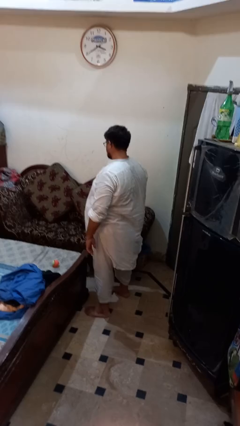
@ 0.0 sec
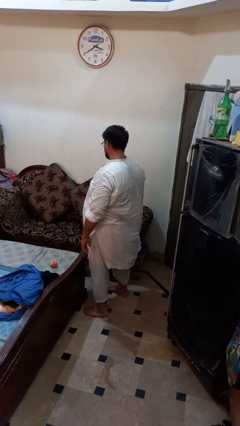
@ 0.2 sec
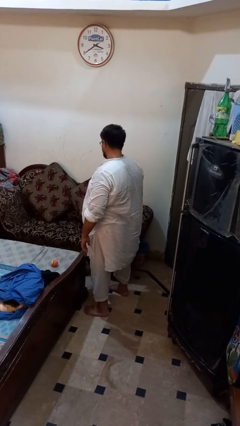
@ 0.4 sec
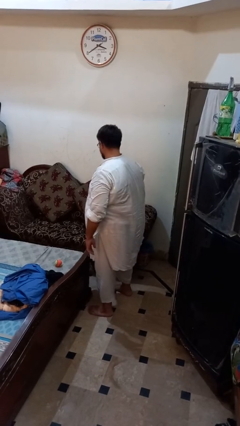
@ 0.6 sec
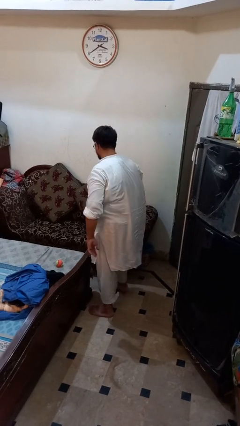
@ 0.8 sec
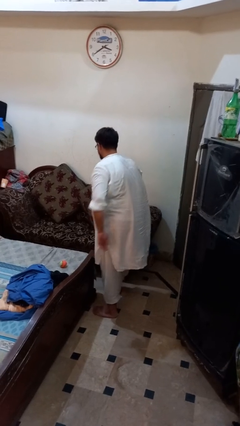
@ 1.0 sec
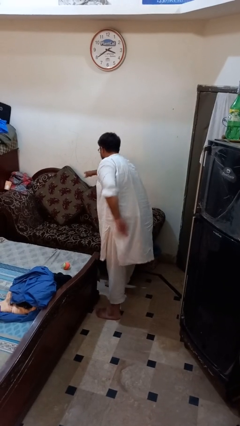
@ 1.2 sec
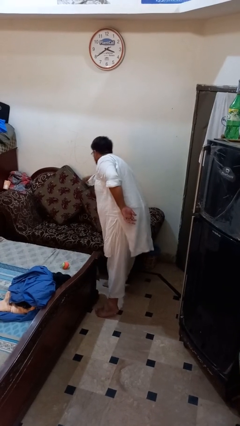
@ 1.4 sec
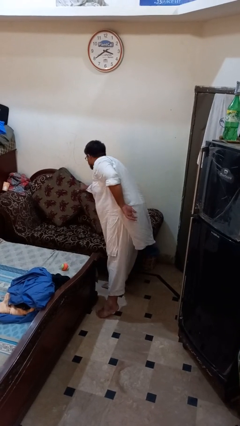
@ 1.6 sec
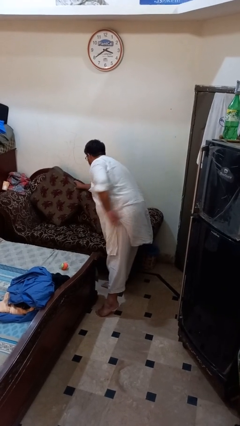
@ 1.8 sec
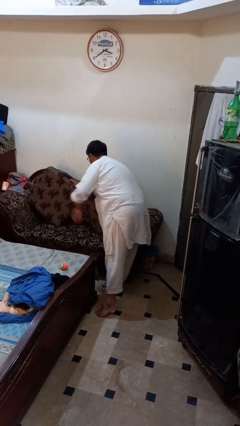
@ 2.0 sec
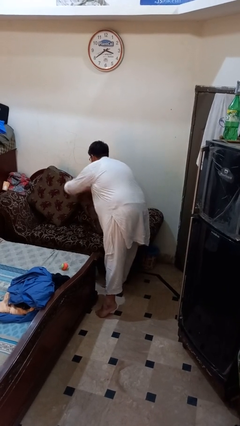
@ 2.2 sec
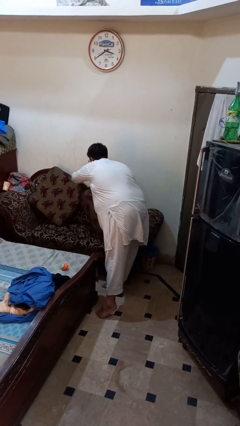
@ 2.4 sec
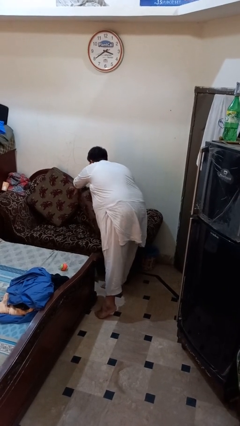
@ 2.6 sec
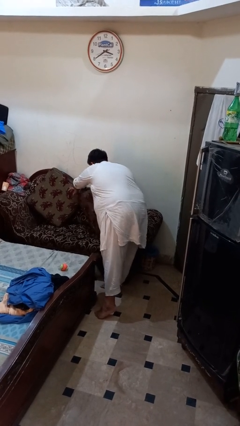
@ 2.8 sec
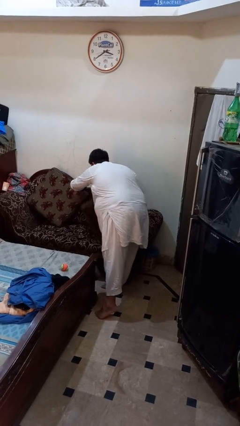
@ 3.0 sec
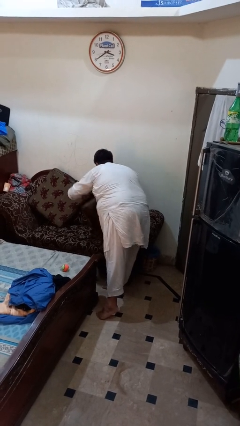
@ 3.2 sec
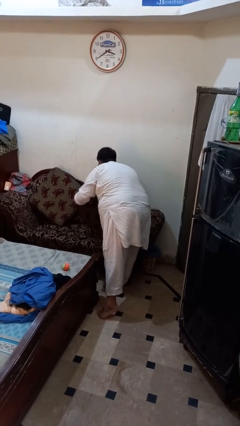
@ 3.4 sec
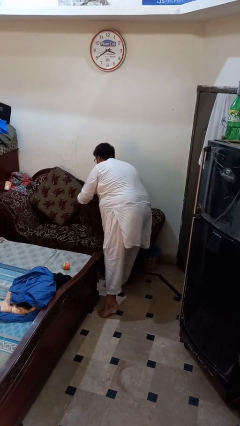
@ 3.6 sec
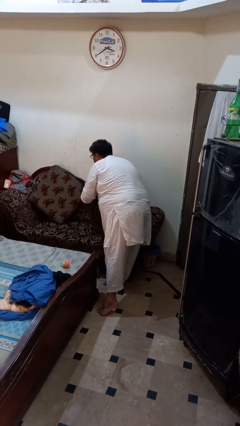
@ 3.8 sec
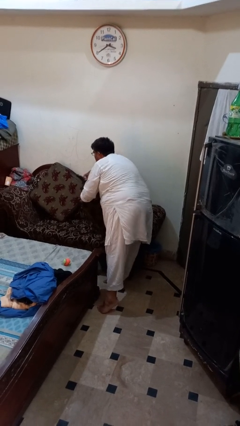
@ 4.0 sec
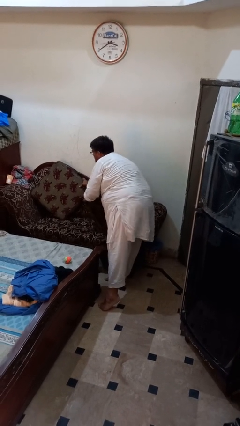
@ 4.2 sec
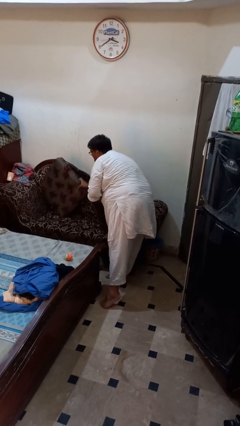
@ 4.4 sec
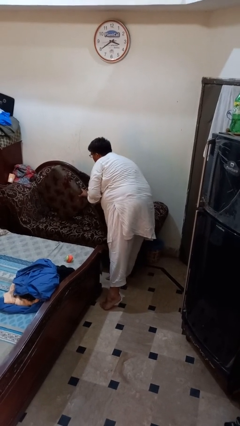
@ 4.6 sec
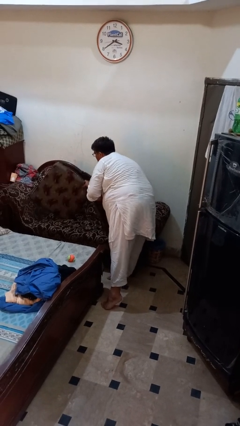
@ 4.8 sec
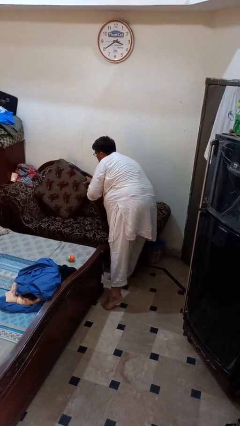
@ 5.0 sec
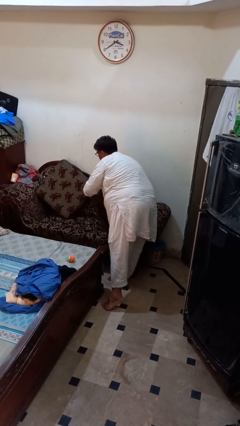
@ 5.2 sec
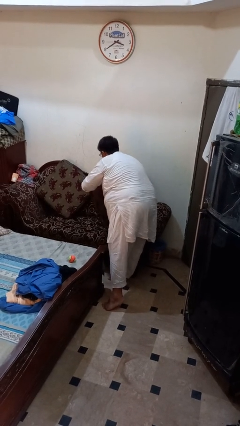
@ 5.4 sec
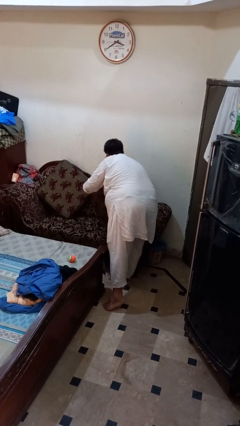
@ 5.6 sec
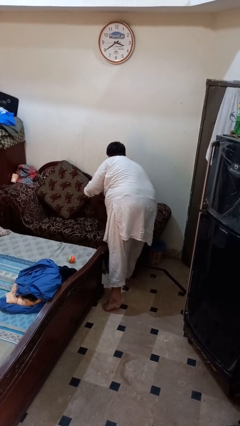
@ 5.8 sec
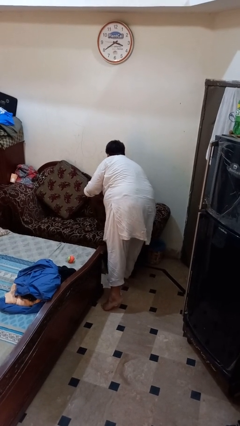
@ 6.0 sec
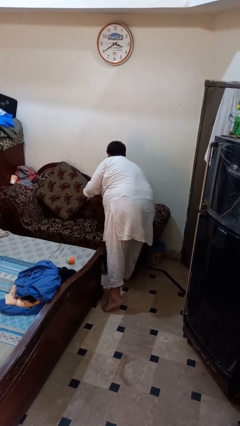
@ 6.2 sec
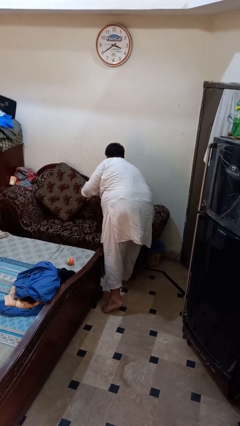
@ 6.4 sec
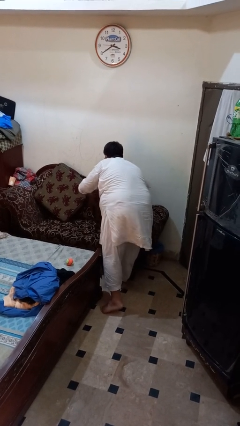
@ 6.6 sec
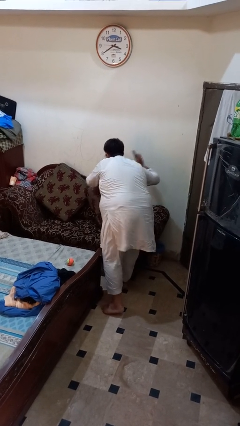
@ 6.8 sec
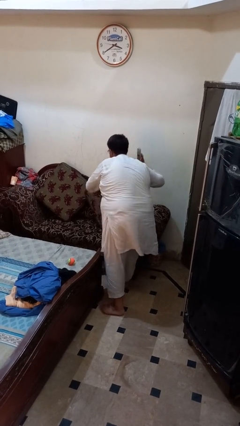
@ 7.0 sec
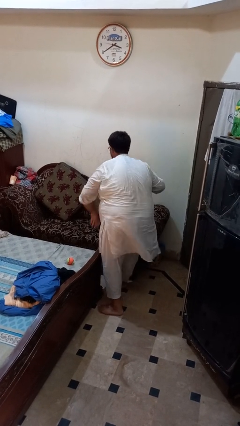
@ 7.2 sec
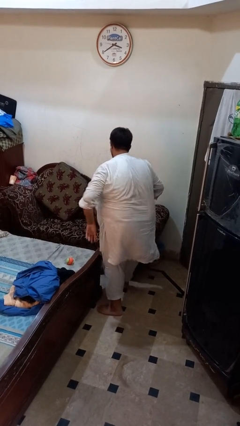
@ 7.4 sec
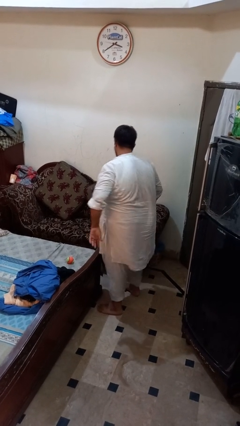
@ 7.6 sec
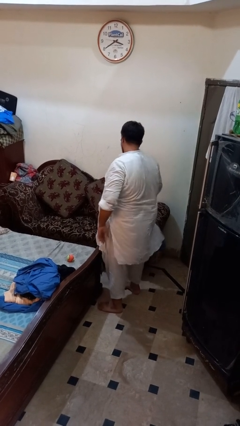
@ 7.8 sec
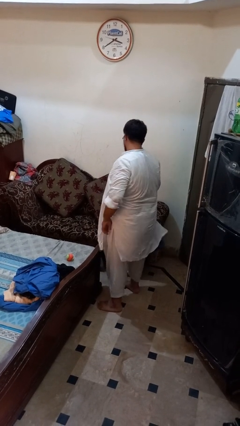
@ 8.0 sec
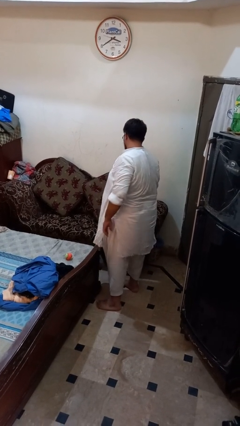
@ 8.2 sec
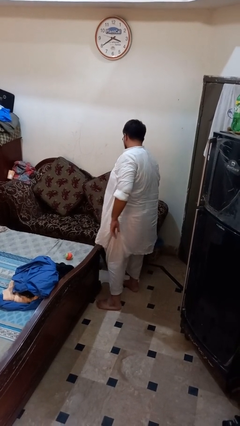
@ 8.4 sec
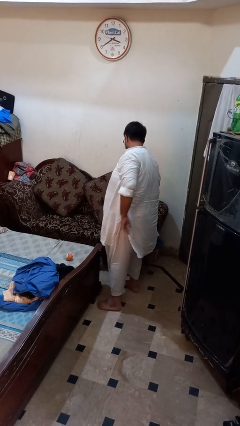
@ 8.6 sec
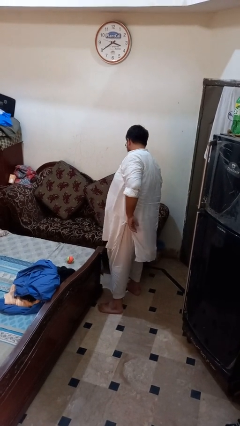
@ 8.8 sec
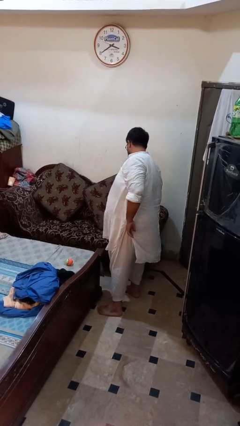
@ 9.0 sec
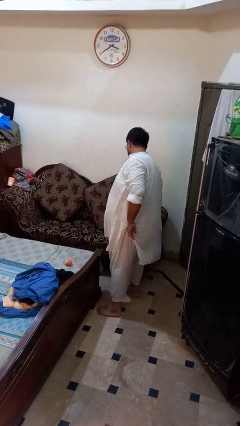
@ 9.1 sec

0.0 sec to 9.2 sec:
person searches in couch

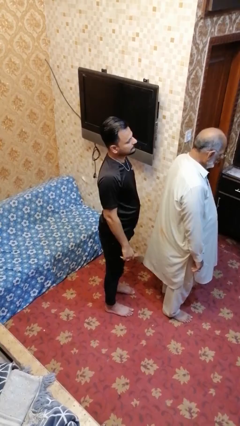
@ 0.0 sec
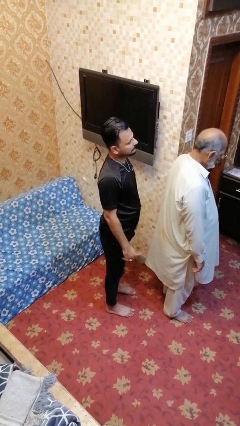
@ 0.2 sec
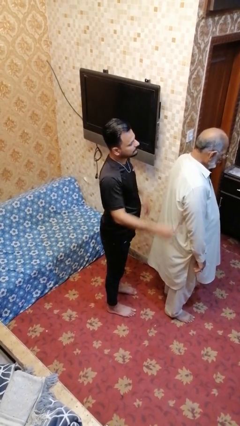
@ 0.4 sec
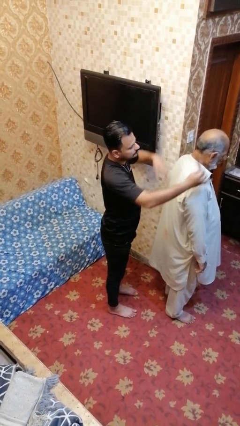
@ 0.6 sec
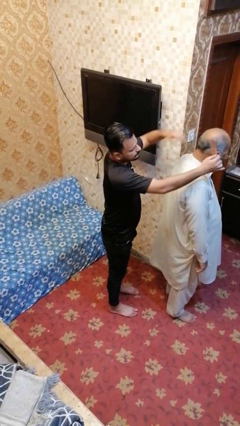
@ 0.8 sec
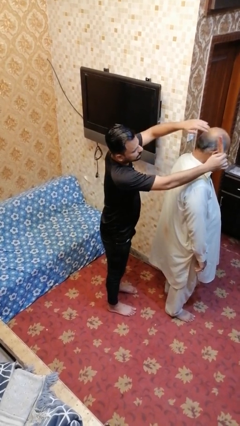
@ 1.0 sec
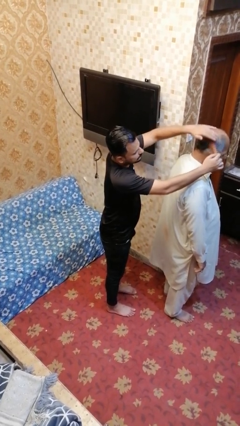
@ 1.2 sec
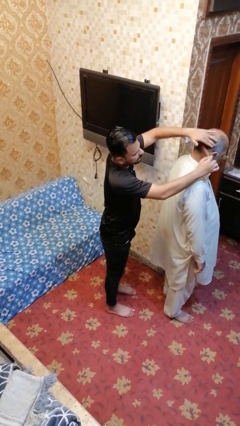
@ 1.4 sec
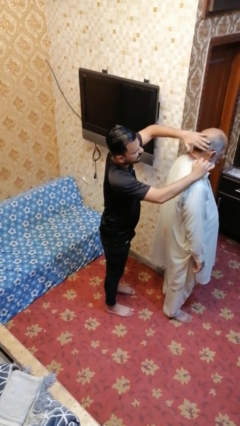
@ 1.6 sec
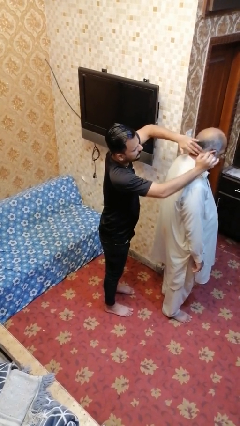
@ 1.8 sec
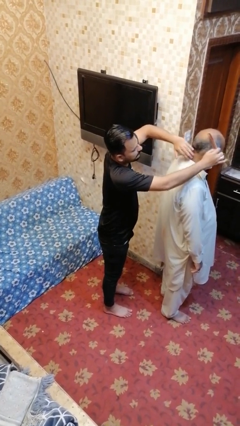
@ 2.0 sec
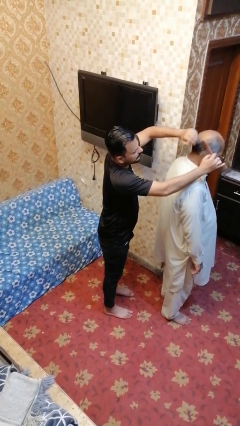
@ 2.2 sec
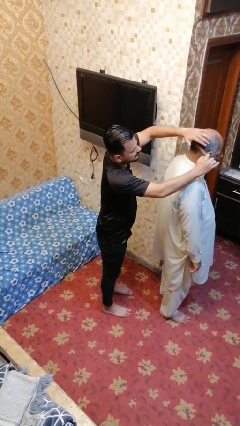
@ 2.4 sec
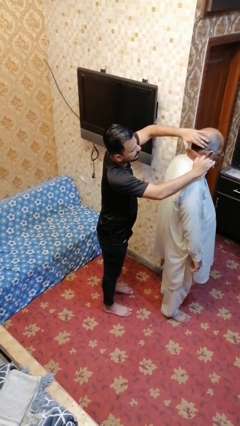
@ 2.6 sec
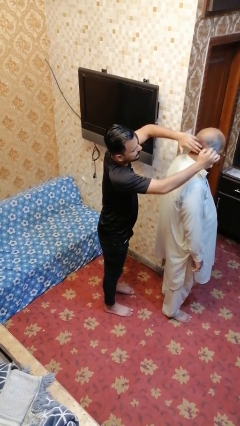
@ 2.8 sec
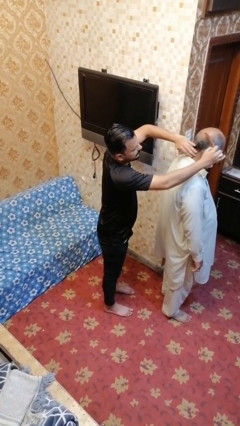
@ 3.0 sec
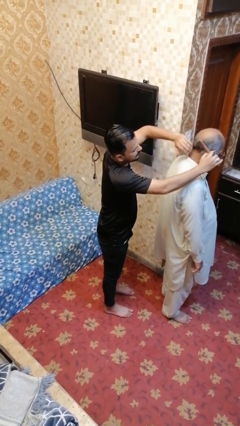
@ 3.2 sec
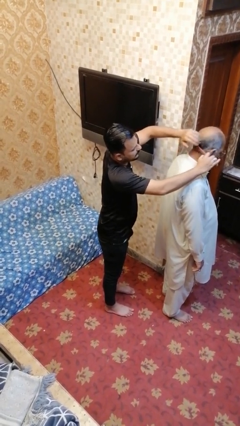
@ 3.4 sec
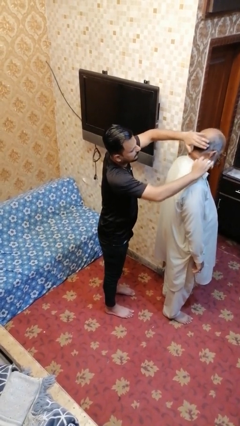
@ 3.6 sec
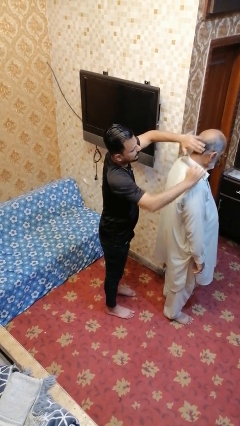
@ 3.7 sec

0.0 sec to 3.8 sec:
person brushes hair of person

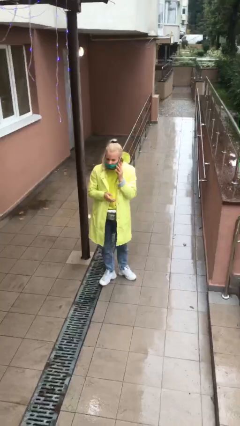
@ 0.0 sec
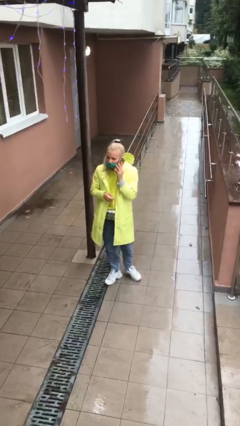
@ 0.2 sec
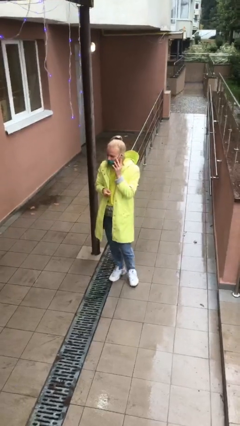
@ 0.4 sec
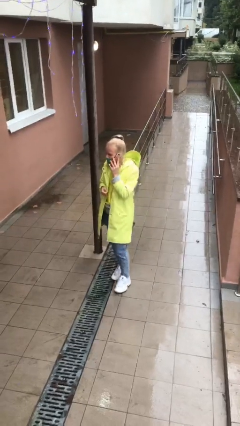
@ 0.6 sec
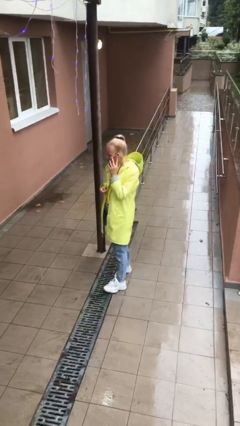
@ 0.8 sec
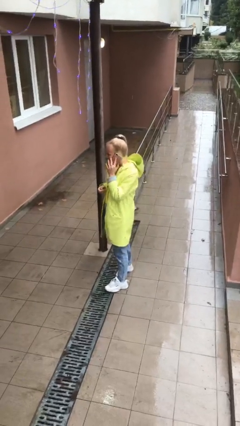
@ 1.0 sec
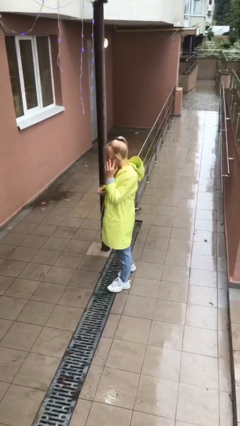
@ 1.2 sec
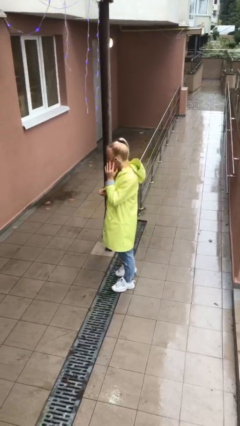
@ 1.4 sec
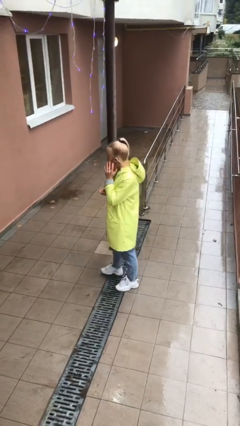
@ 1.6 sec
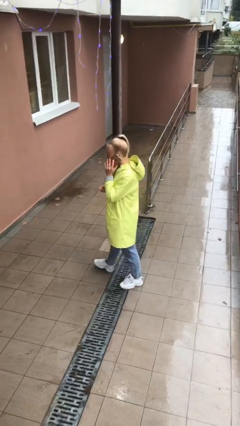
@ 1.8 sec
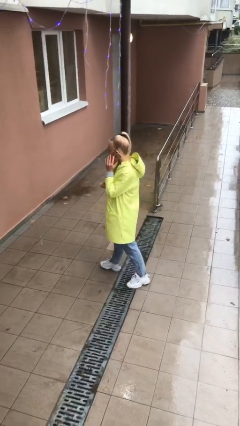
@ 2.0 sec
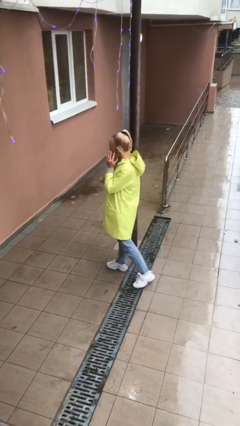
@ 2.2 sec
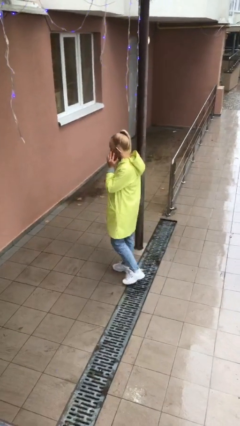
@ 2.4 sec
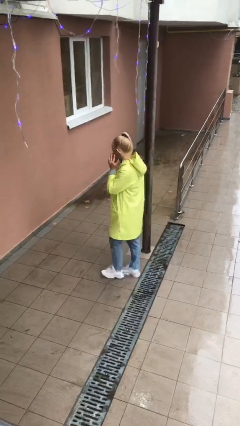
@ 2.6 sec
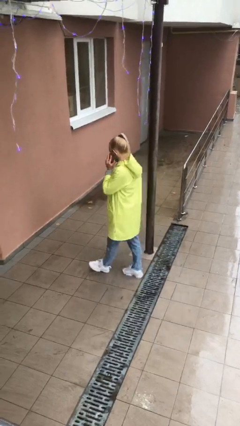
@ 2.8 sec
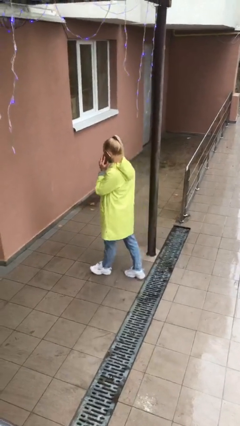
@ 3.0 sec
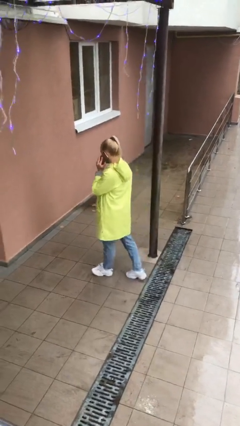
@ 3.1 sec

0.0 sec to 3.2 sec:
person talks on phone

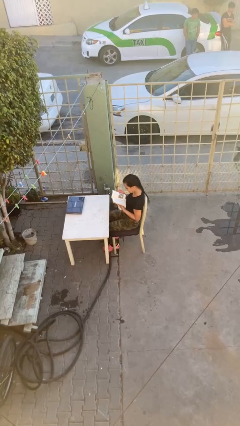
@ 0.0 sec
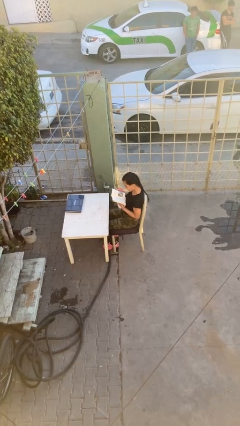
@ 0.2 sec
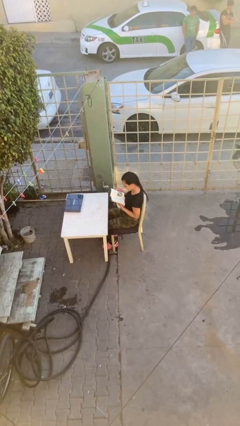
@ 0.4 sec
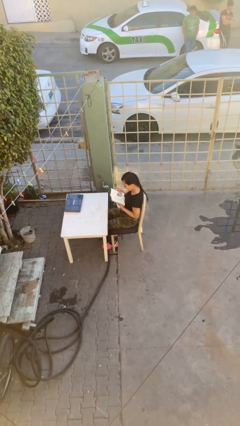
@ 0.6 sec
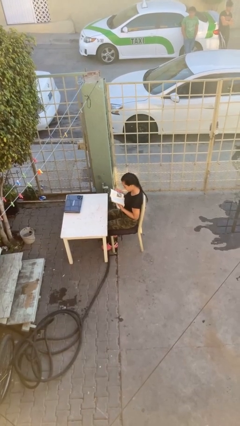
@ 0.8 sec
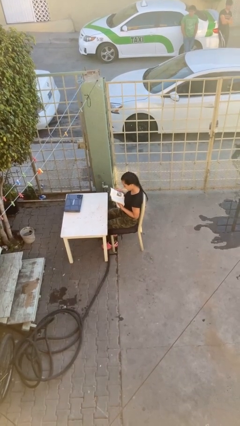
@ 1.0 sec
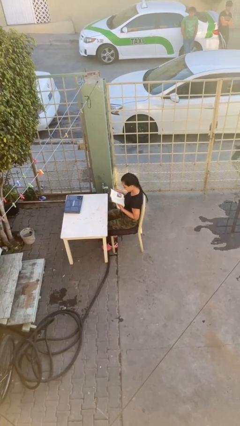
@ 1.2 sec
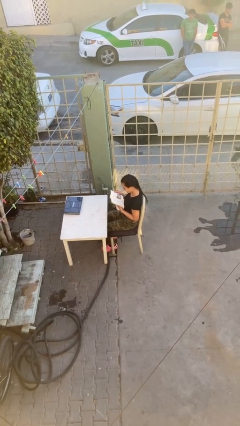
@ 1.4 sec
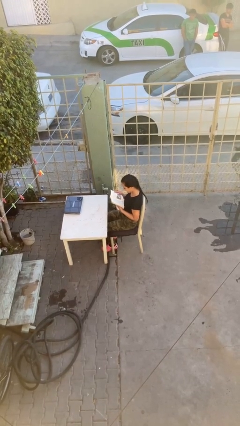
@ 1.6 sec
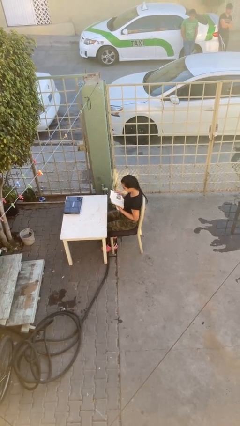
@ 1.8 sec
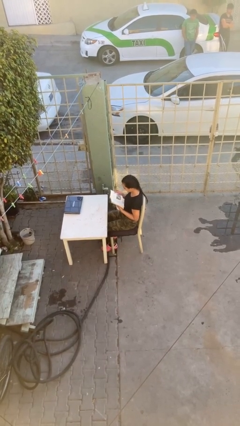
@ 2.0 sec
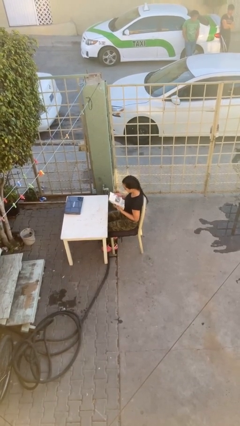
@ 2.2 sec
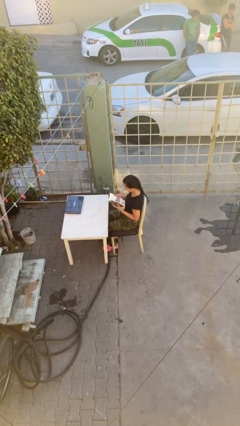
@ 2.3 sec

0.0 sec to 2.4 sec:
person reads document
